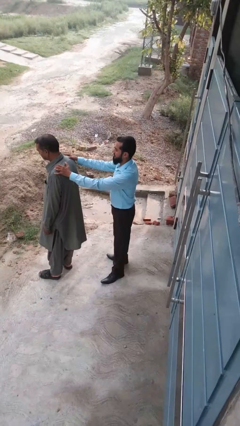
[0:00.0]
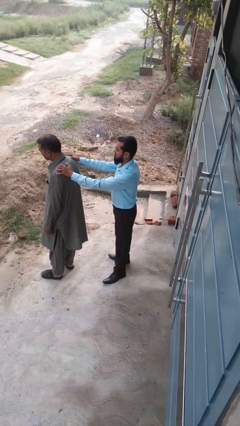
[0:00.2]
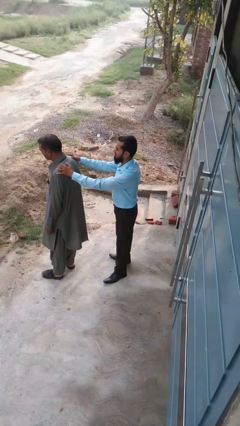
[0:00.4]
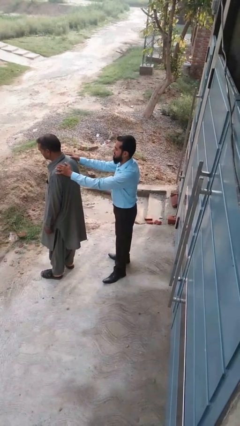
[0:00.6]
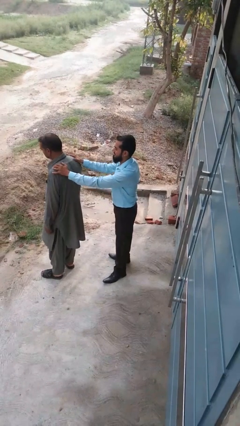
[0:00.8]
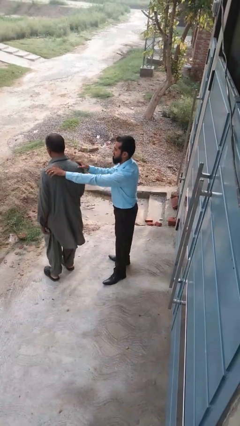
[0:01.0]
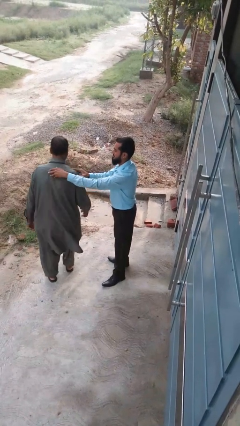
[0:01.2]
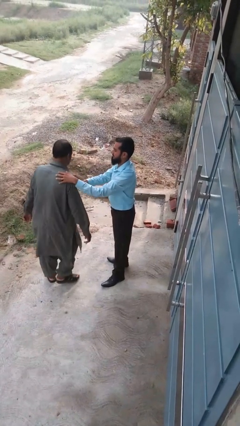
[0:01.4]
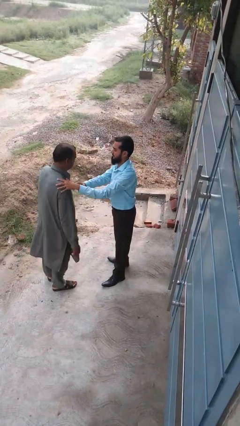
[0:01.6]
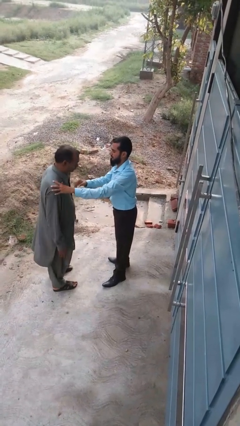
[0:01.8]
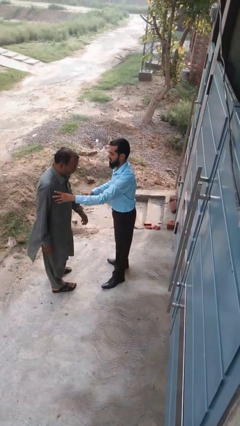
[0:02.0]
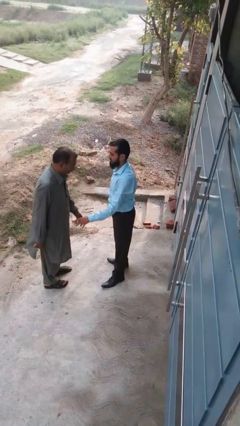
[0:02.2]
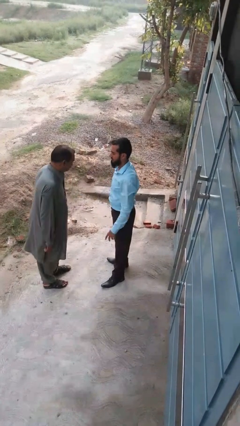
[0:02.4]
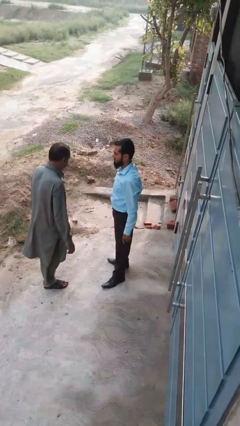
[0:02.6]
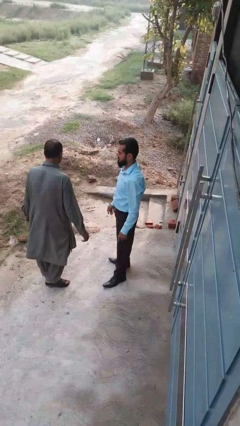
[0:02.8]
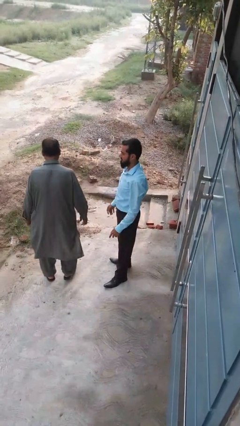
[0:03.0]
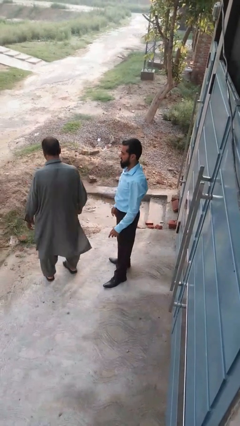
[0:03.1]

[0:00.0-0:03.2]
person spins person around

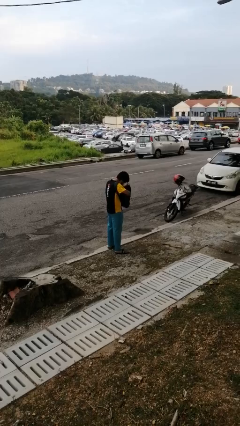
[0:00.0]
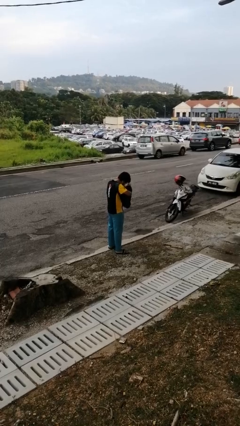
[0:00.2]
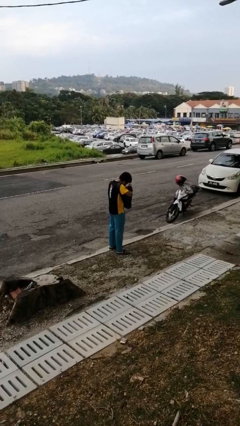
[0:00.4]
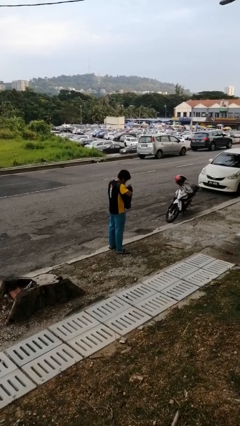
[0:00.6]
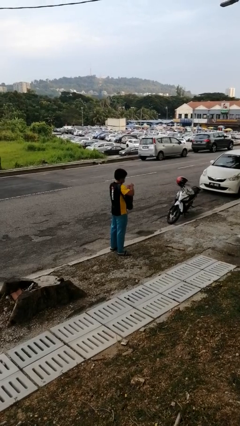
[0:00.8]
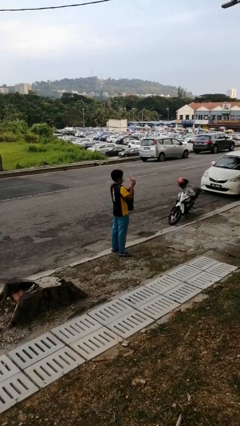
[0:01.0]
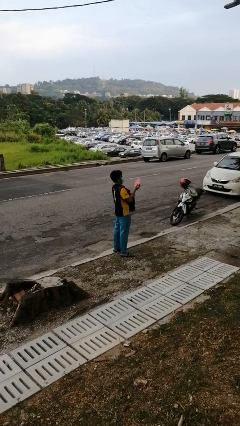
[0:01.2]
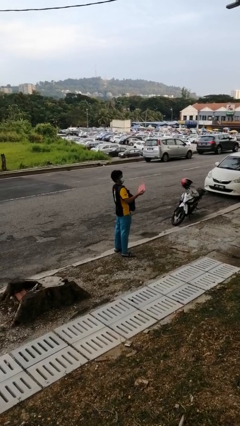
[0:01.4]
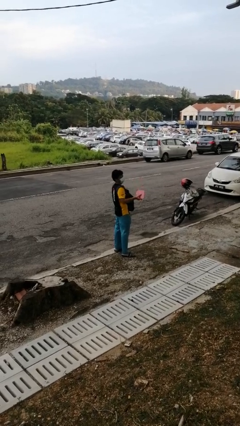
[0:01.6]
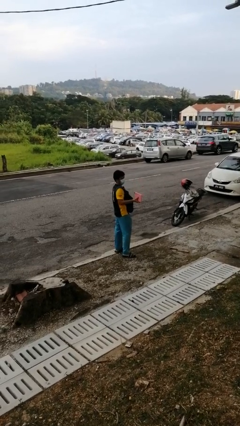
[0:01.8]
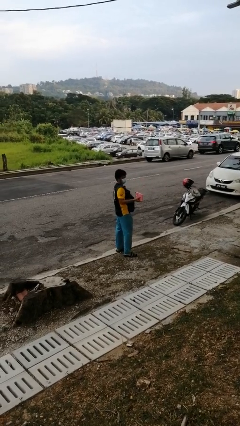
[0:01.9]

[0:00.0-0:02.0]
person takes object from backpack

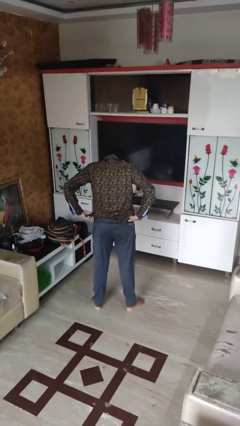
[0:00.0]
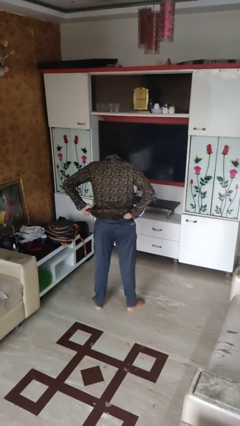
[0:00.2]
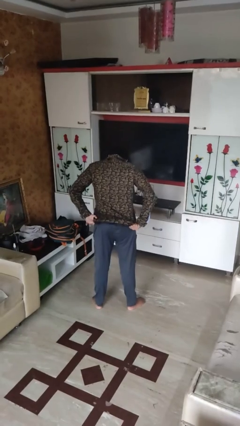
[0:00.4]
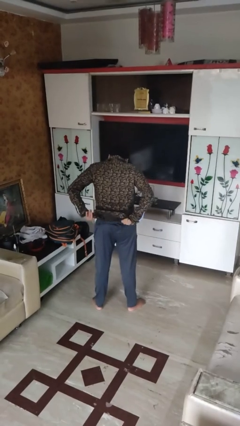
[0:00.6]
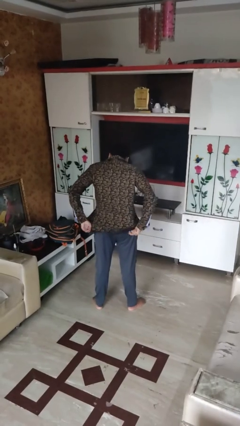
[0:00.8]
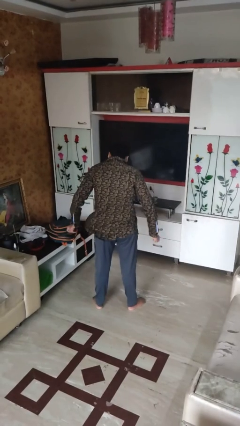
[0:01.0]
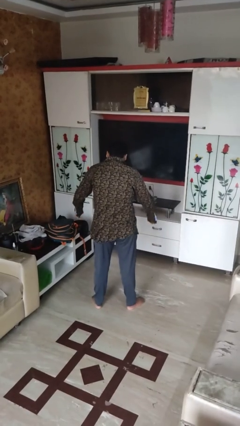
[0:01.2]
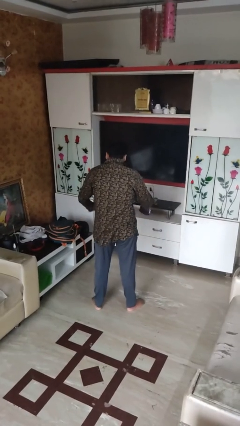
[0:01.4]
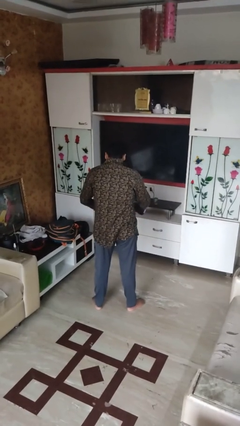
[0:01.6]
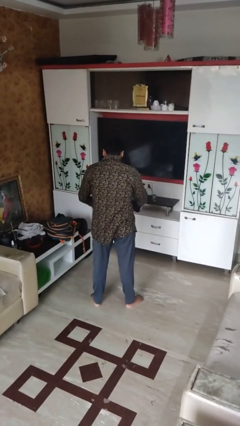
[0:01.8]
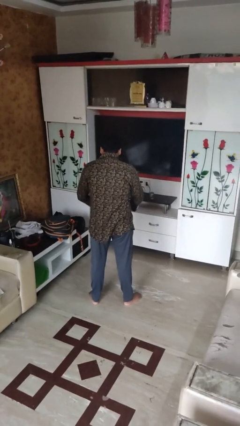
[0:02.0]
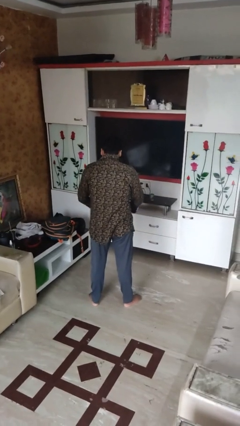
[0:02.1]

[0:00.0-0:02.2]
person untucks shirt

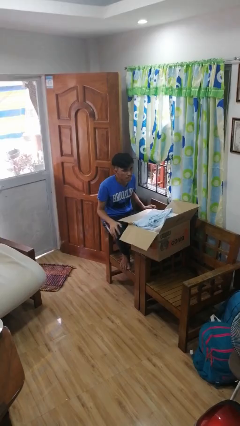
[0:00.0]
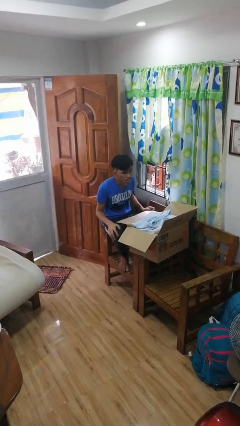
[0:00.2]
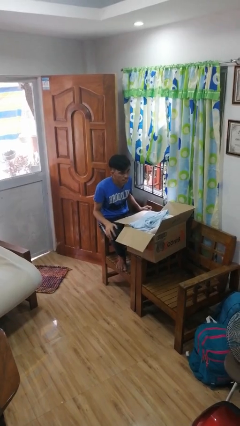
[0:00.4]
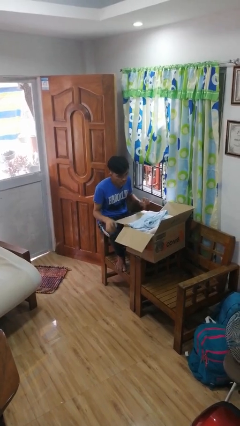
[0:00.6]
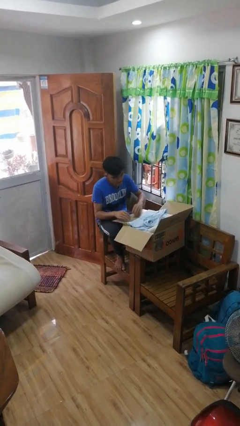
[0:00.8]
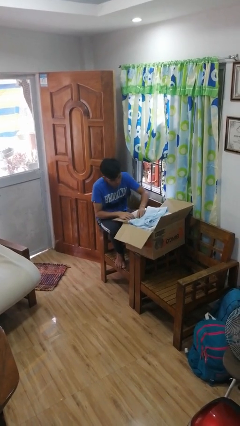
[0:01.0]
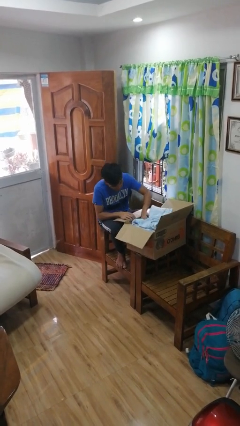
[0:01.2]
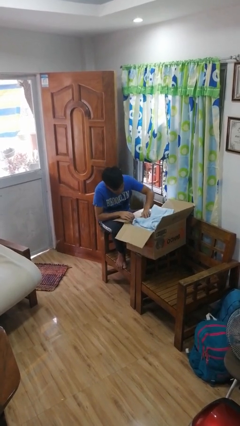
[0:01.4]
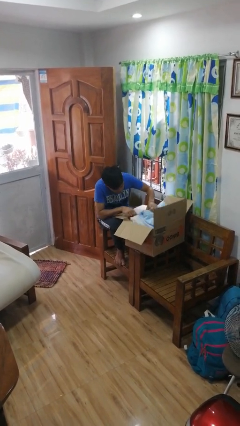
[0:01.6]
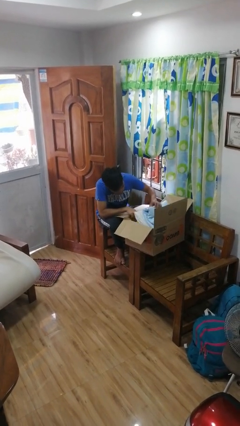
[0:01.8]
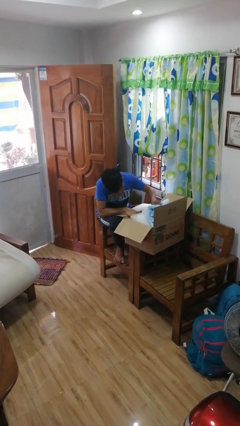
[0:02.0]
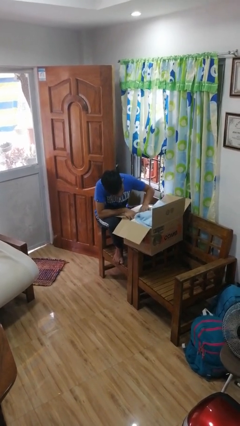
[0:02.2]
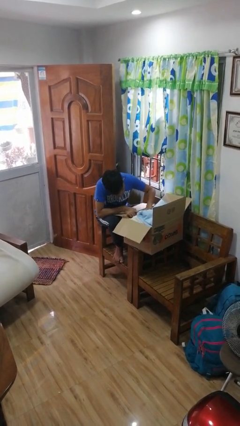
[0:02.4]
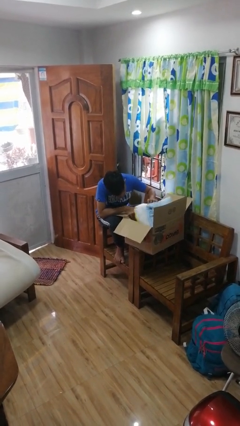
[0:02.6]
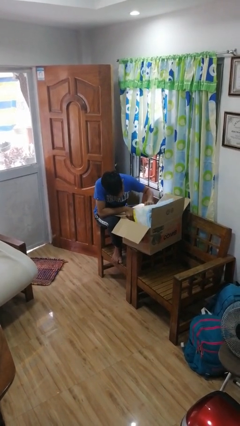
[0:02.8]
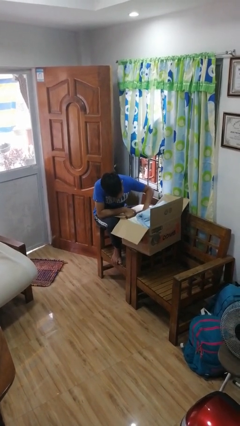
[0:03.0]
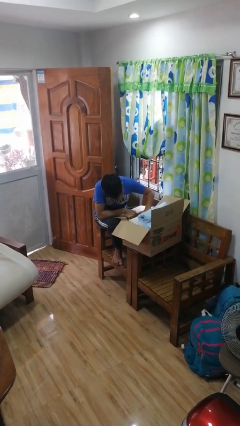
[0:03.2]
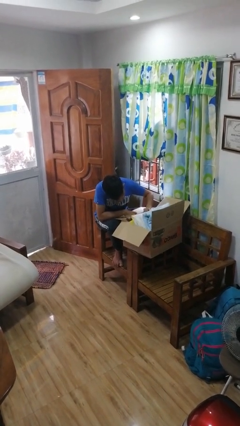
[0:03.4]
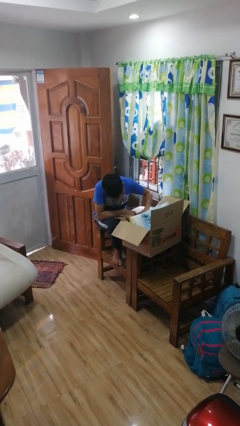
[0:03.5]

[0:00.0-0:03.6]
person searches in box

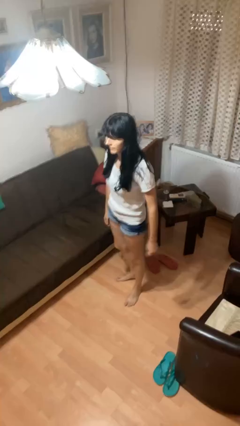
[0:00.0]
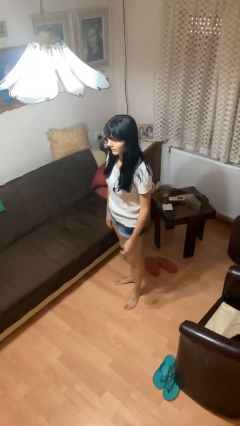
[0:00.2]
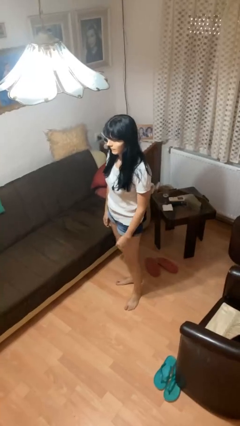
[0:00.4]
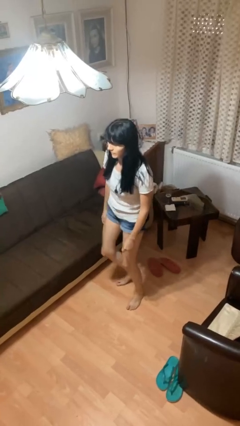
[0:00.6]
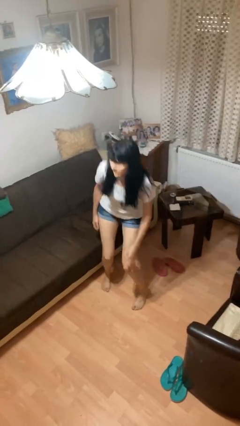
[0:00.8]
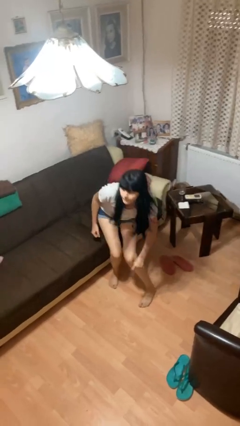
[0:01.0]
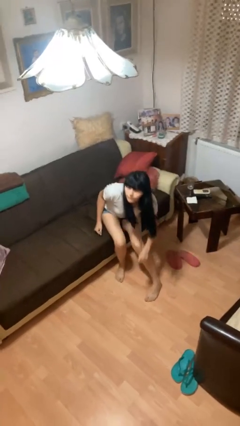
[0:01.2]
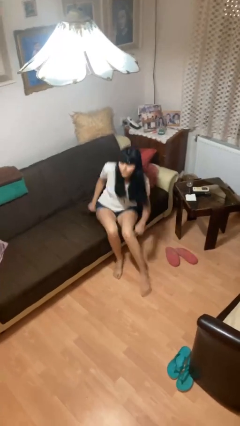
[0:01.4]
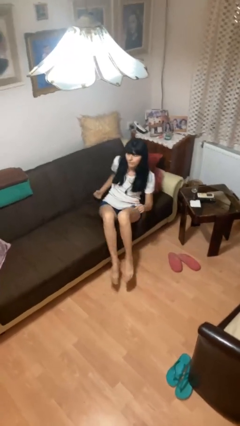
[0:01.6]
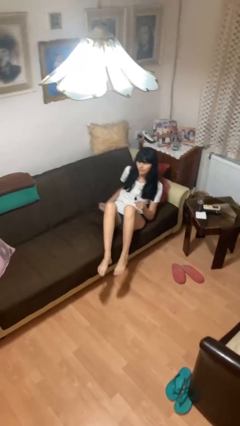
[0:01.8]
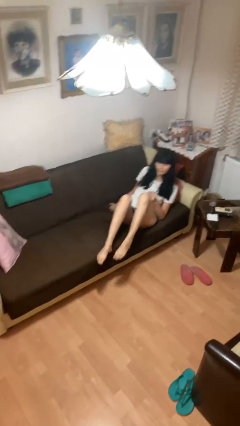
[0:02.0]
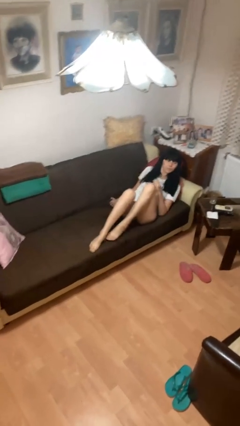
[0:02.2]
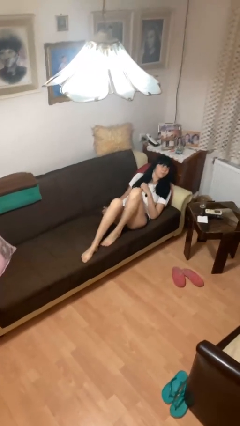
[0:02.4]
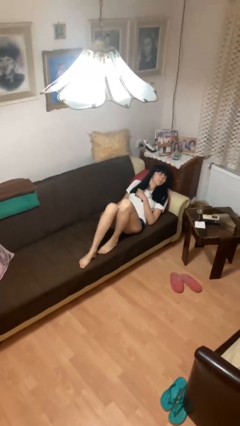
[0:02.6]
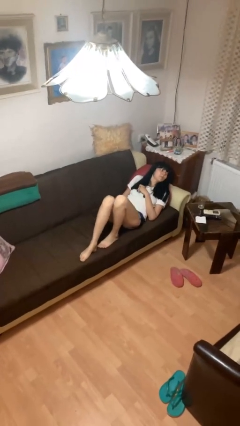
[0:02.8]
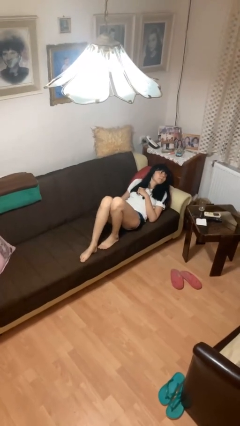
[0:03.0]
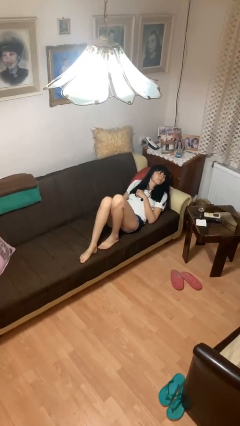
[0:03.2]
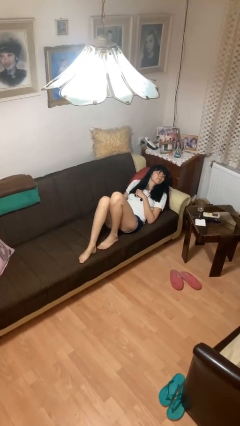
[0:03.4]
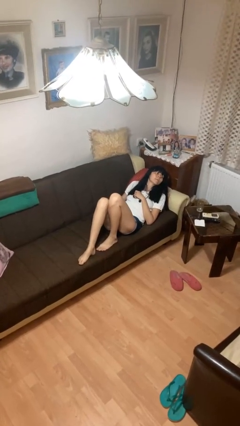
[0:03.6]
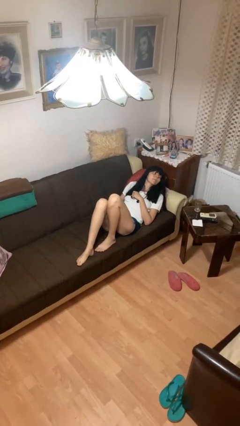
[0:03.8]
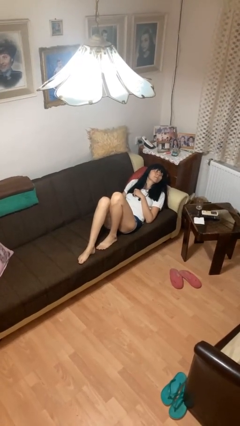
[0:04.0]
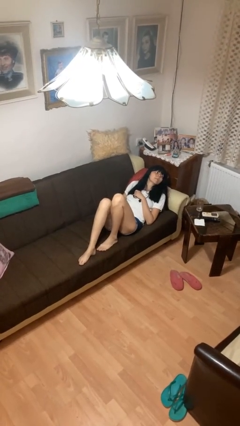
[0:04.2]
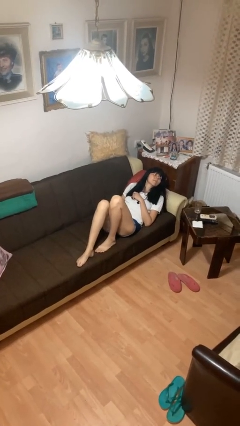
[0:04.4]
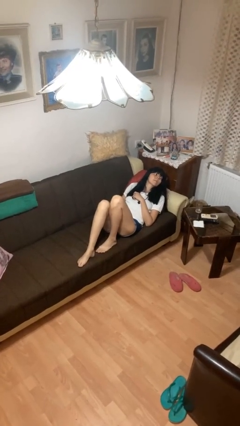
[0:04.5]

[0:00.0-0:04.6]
person lies down on couch

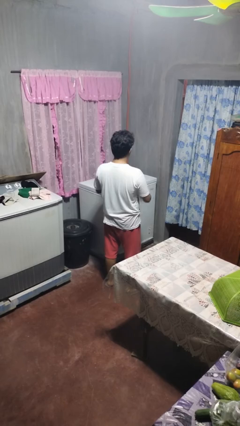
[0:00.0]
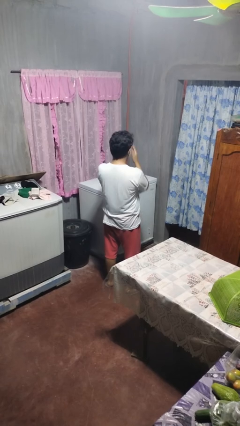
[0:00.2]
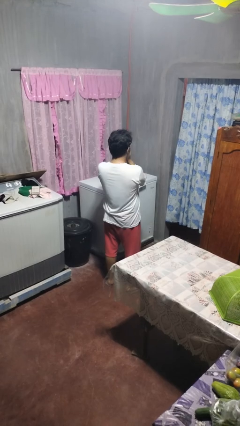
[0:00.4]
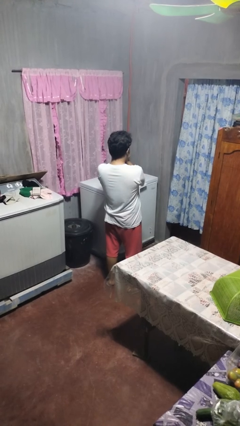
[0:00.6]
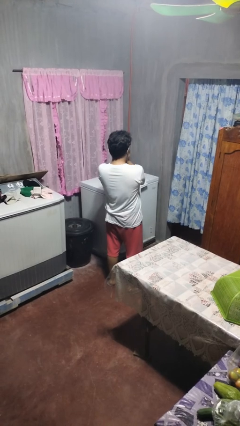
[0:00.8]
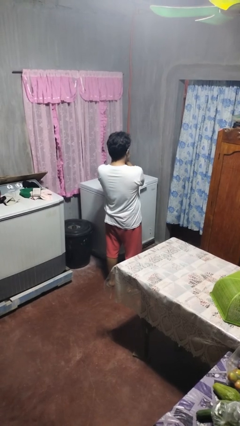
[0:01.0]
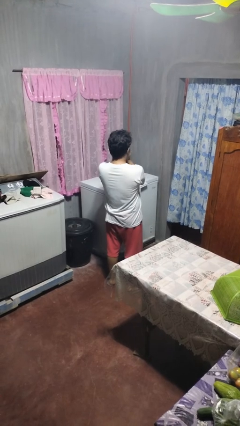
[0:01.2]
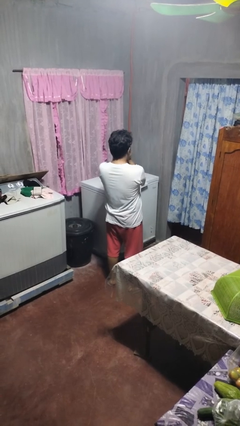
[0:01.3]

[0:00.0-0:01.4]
person covers face with hands

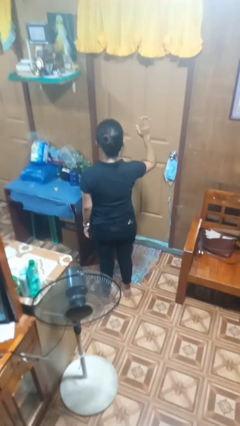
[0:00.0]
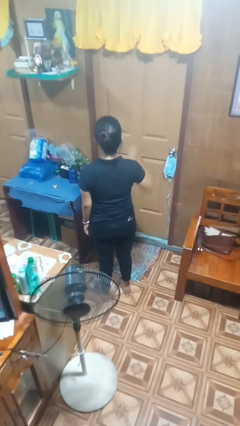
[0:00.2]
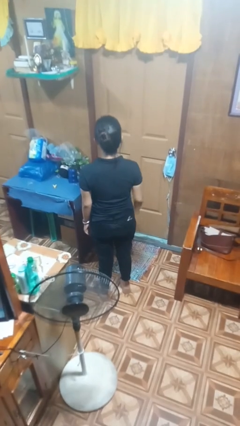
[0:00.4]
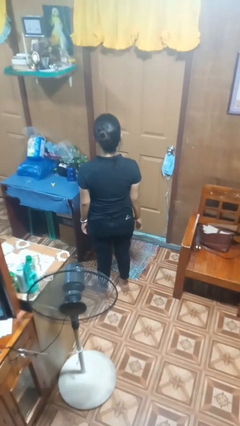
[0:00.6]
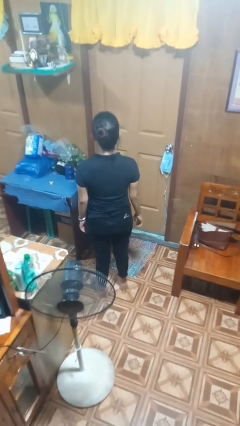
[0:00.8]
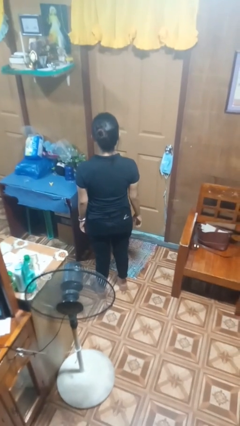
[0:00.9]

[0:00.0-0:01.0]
person gestures lower hand
